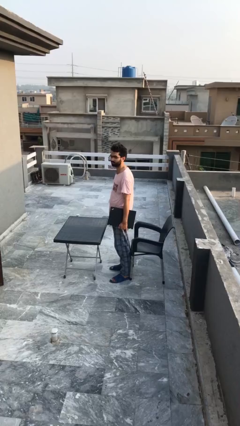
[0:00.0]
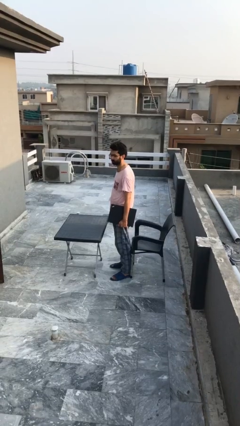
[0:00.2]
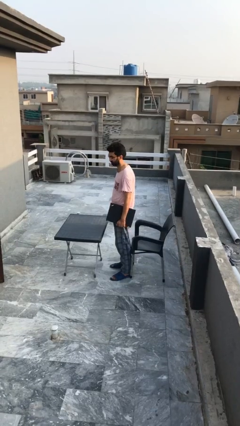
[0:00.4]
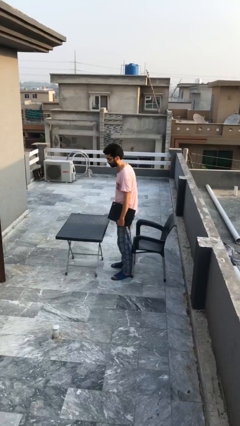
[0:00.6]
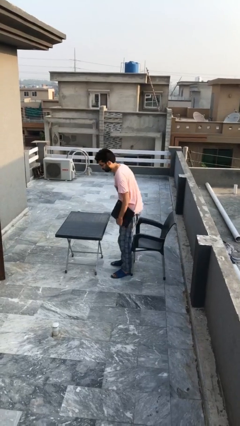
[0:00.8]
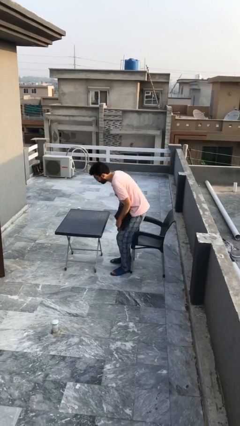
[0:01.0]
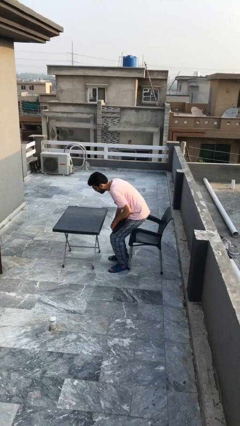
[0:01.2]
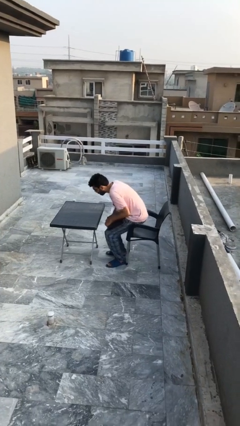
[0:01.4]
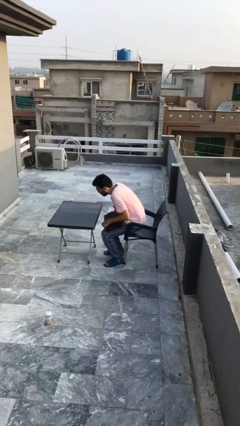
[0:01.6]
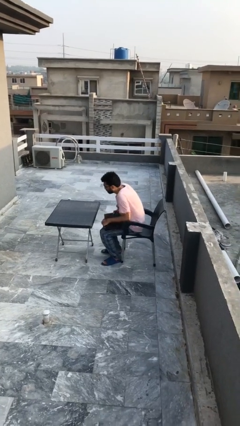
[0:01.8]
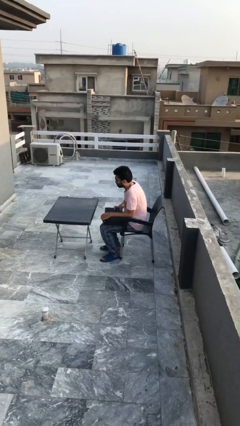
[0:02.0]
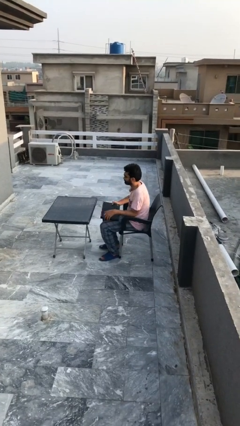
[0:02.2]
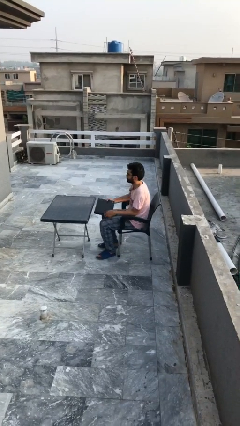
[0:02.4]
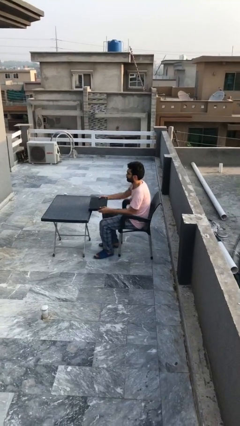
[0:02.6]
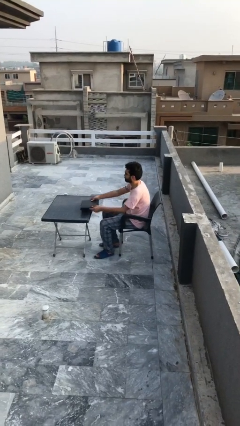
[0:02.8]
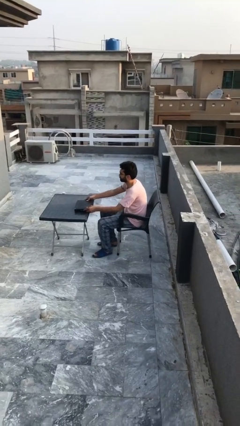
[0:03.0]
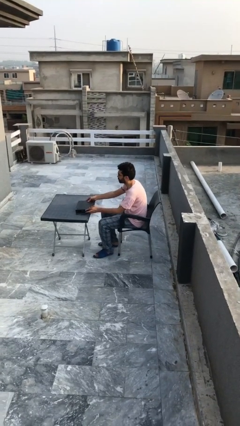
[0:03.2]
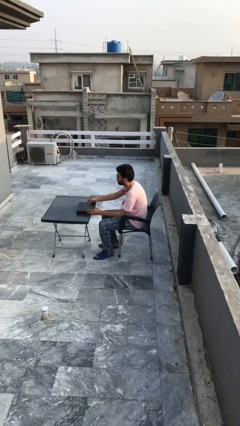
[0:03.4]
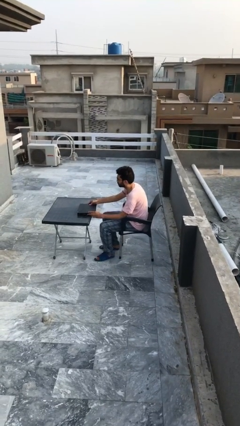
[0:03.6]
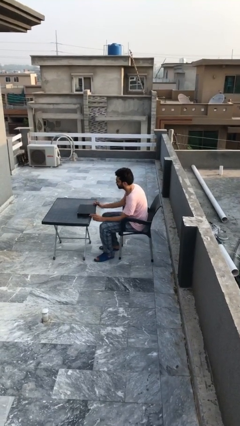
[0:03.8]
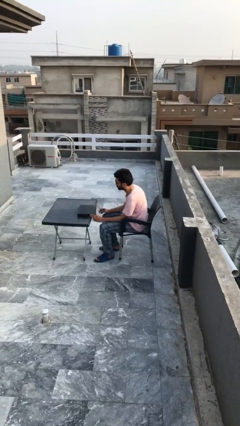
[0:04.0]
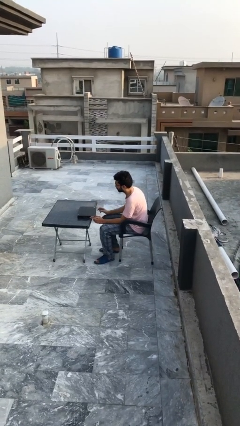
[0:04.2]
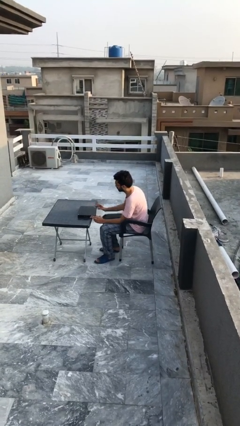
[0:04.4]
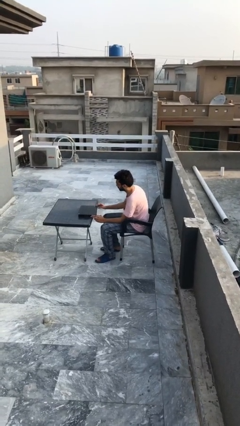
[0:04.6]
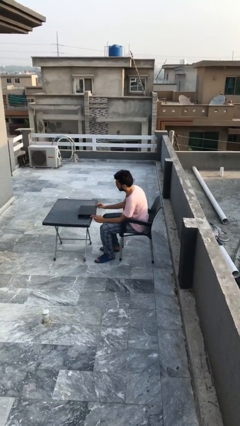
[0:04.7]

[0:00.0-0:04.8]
person sits down

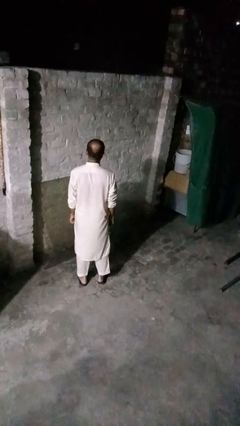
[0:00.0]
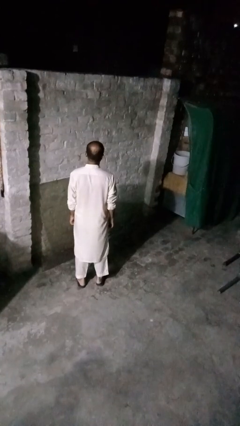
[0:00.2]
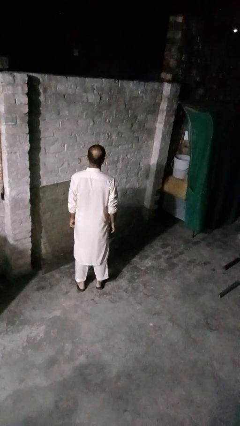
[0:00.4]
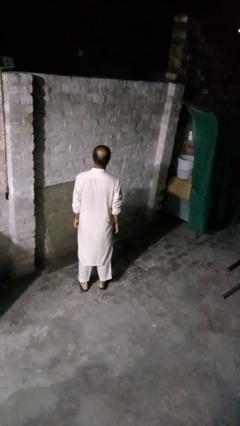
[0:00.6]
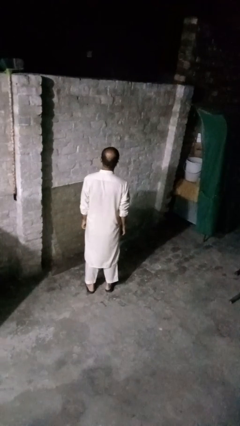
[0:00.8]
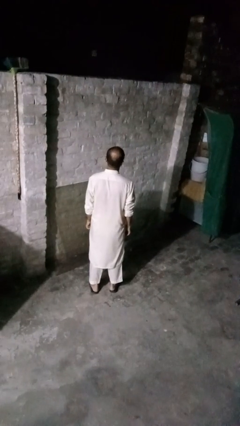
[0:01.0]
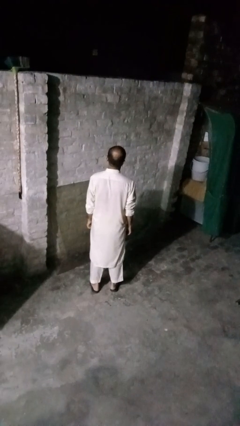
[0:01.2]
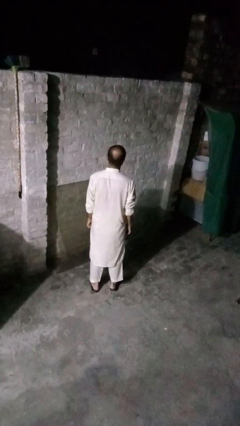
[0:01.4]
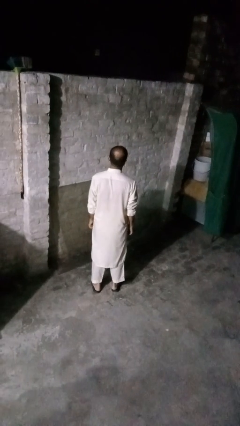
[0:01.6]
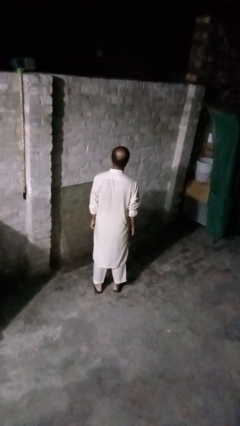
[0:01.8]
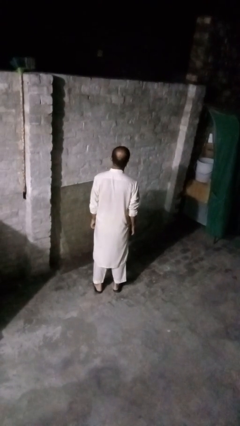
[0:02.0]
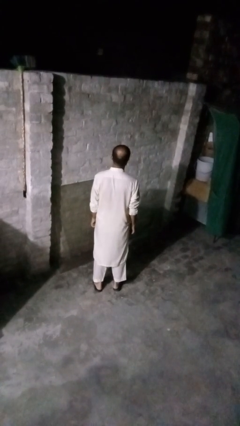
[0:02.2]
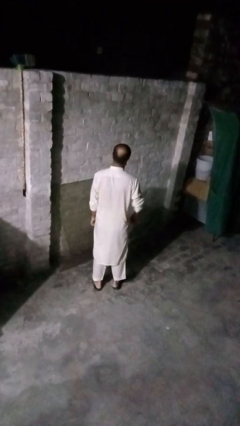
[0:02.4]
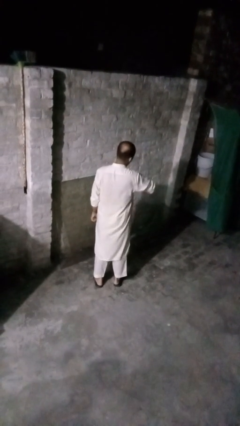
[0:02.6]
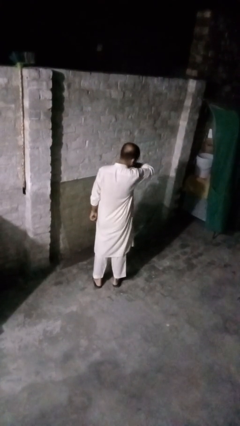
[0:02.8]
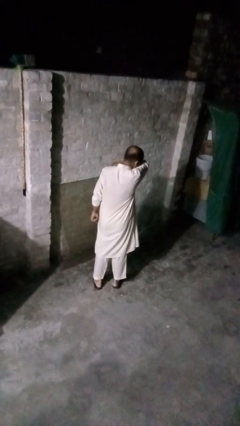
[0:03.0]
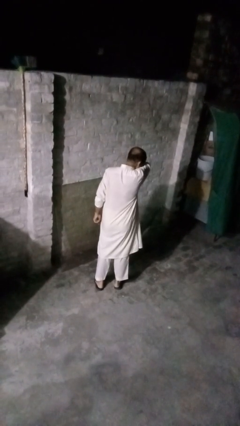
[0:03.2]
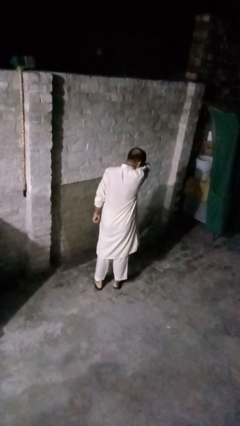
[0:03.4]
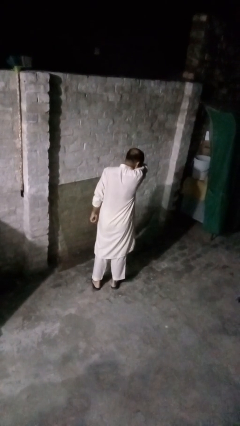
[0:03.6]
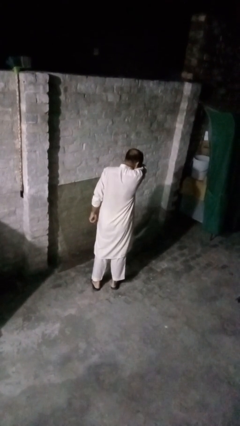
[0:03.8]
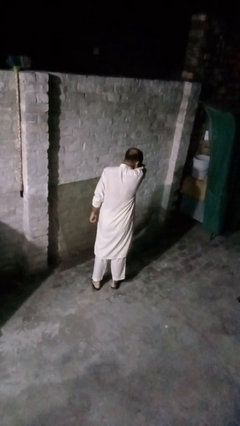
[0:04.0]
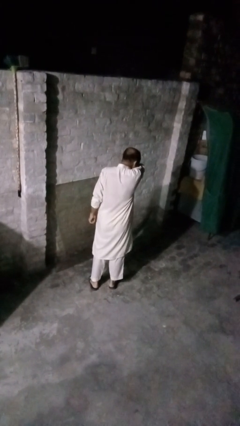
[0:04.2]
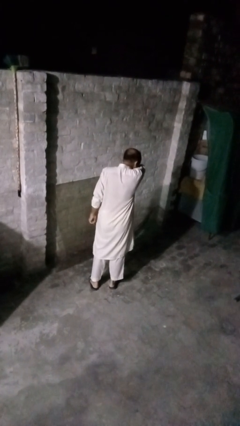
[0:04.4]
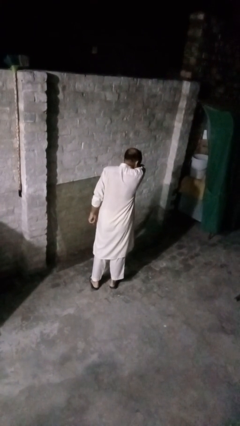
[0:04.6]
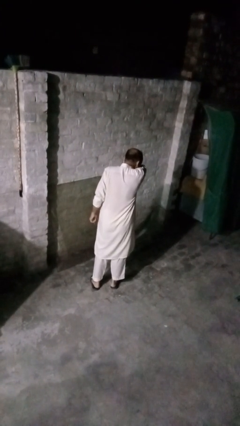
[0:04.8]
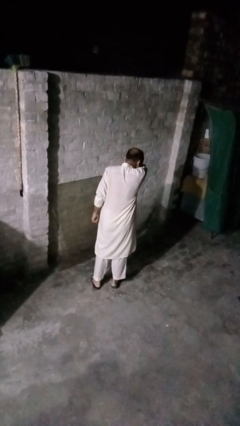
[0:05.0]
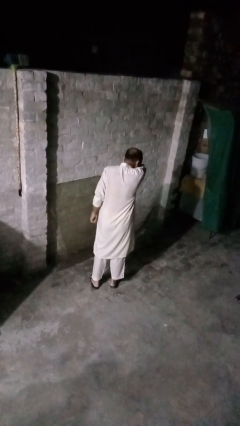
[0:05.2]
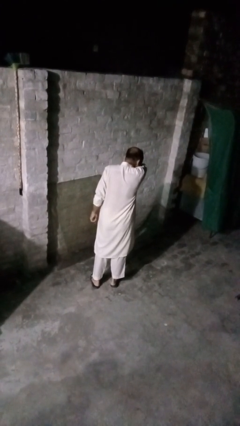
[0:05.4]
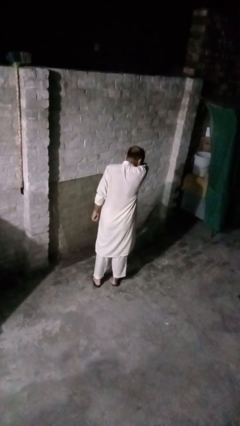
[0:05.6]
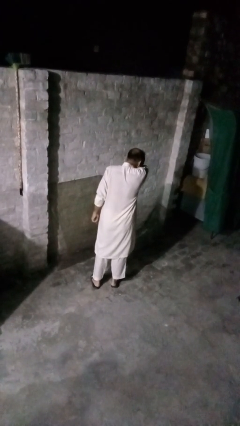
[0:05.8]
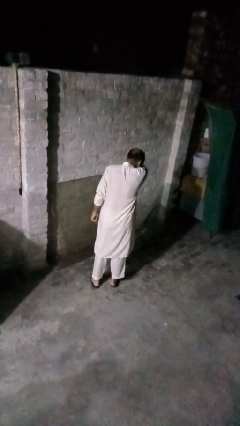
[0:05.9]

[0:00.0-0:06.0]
person sneezes into arm

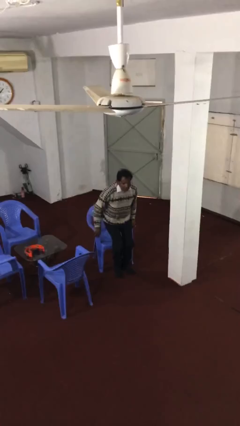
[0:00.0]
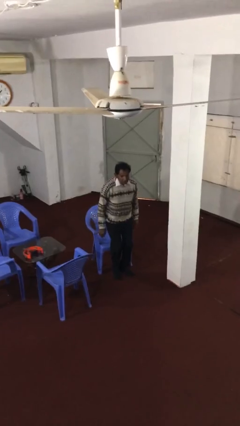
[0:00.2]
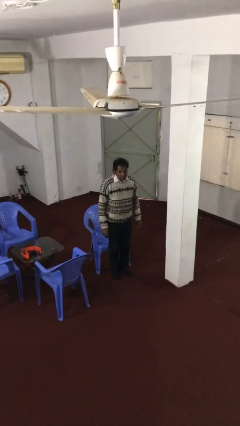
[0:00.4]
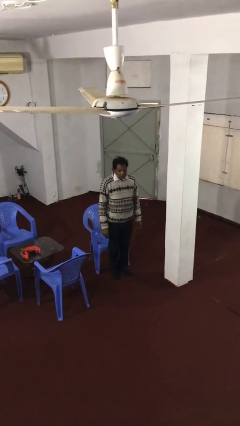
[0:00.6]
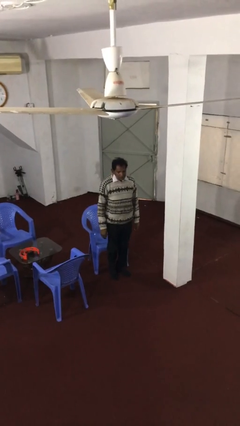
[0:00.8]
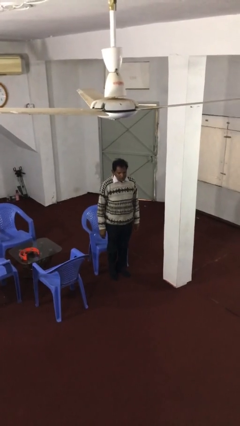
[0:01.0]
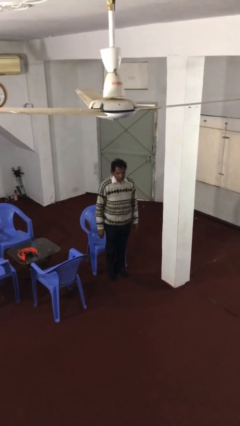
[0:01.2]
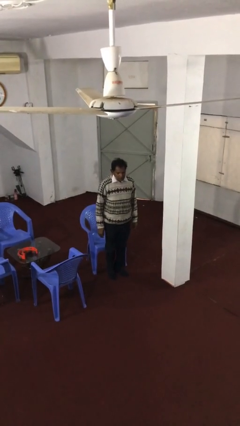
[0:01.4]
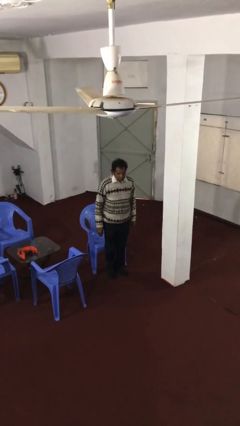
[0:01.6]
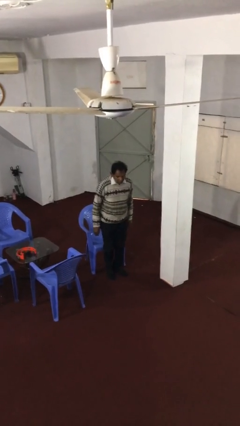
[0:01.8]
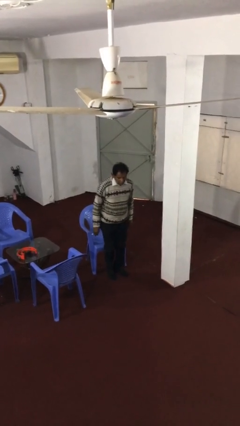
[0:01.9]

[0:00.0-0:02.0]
person stands up

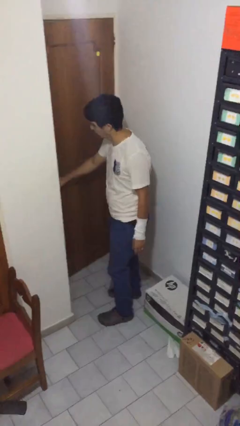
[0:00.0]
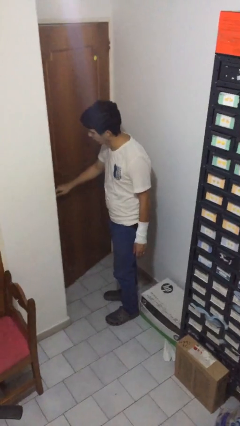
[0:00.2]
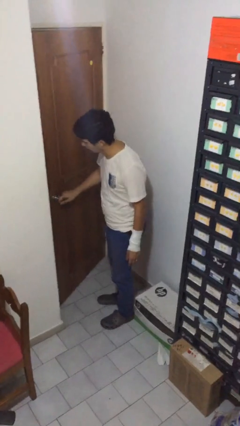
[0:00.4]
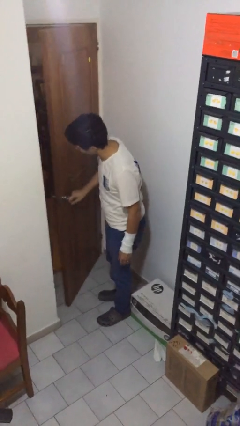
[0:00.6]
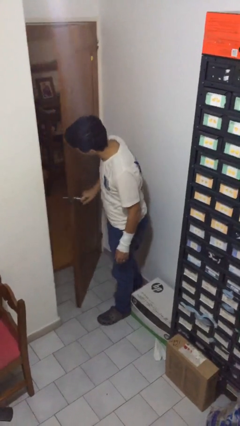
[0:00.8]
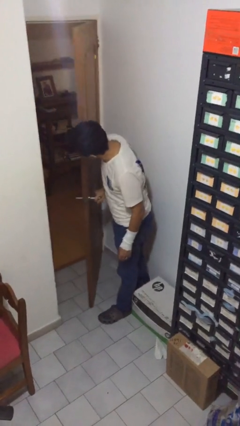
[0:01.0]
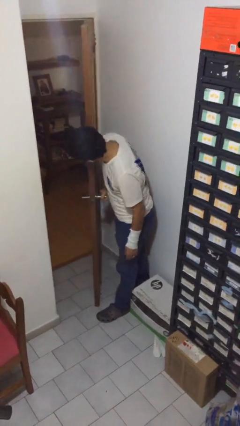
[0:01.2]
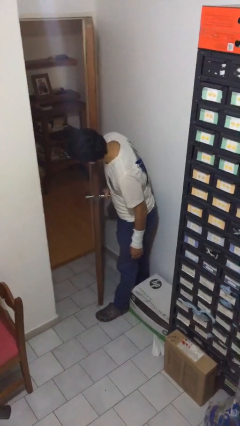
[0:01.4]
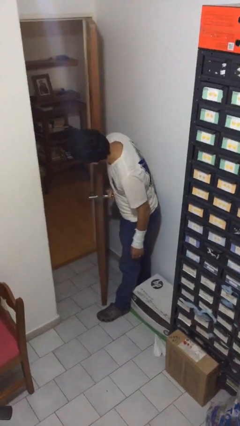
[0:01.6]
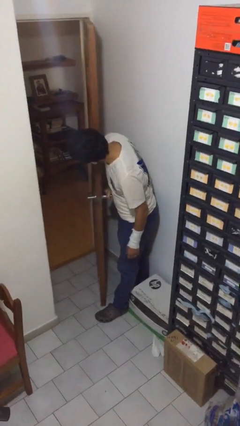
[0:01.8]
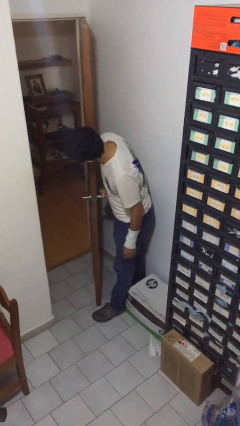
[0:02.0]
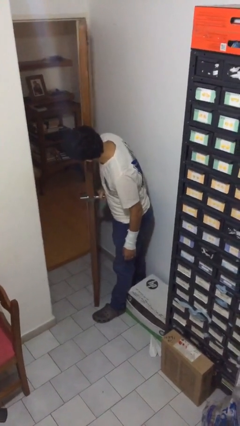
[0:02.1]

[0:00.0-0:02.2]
person opens facility door

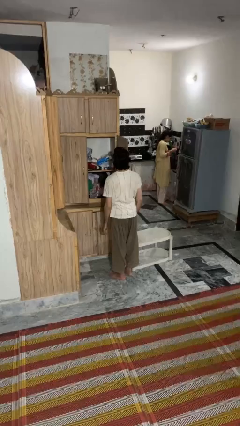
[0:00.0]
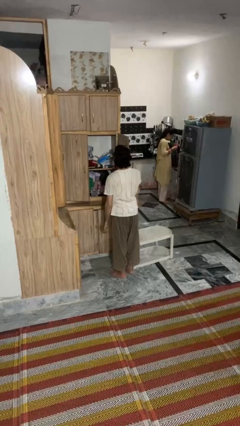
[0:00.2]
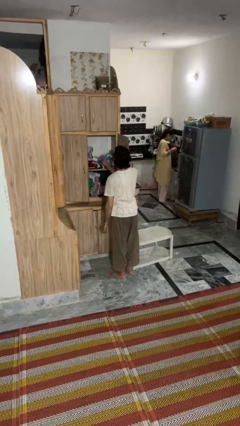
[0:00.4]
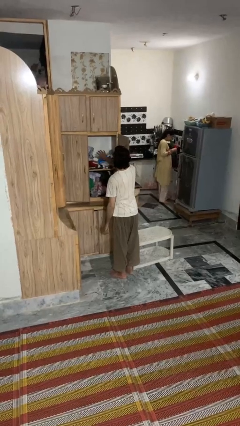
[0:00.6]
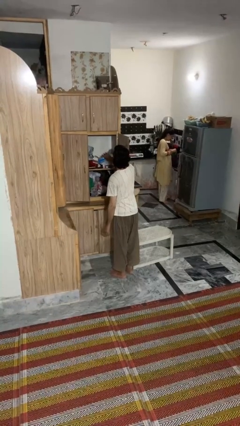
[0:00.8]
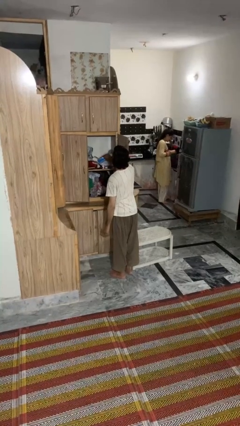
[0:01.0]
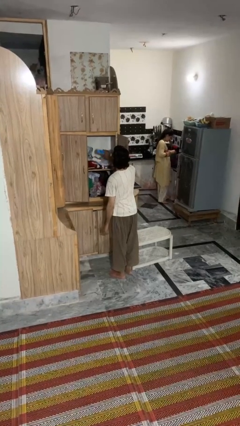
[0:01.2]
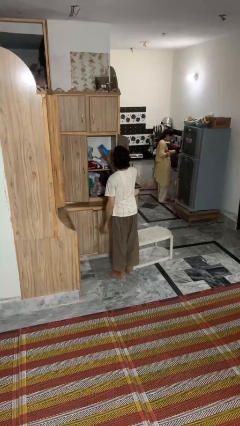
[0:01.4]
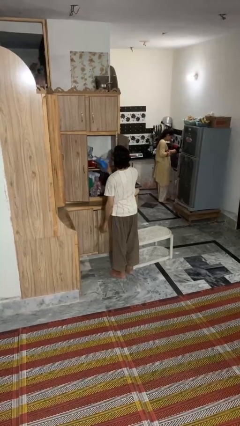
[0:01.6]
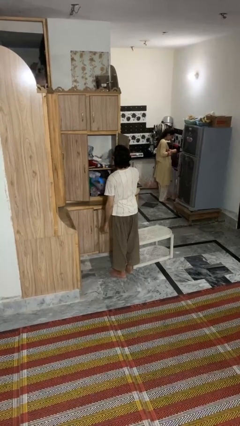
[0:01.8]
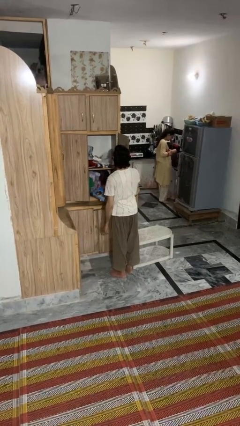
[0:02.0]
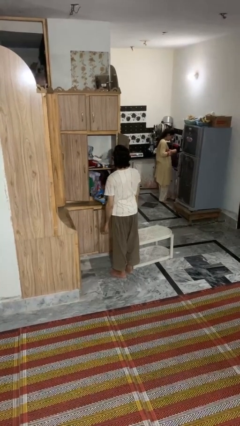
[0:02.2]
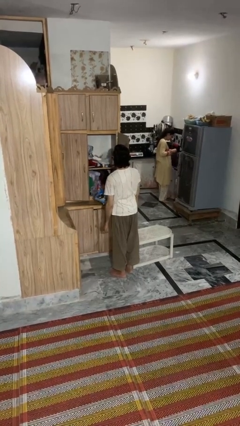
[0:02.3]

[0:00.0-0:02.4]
person picks up object from cabinet
